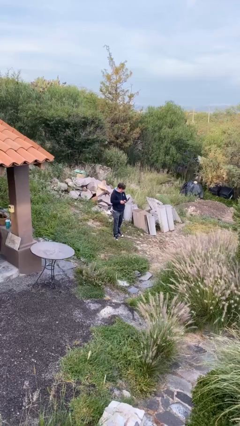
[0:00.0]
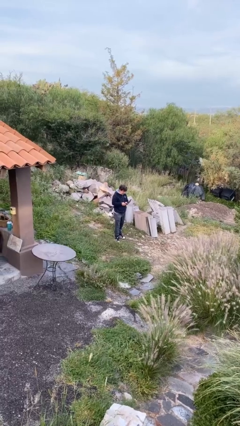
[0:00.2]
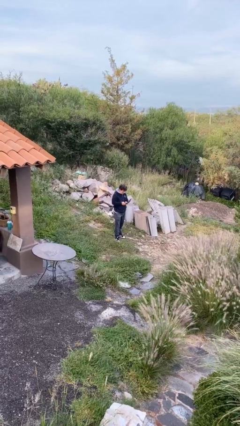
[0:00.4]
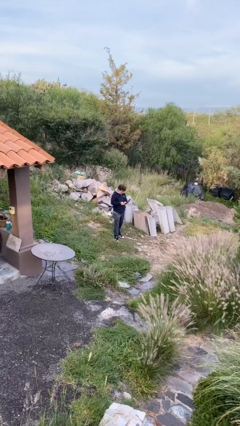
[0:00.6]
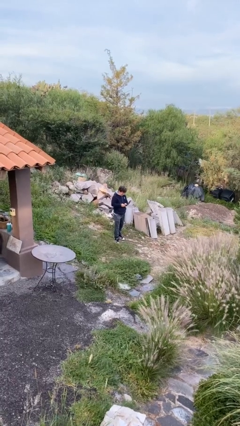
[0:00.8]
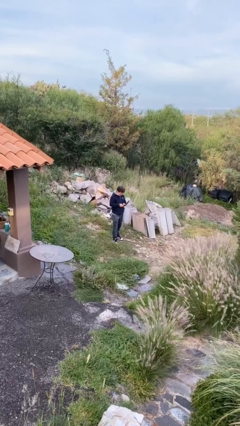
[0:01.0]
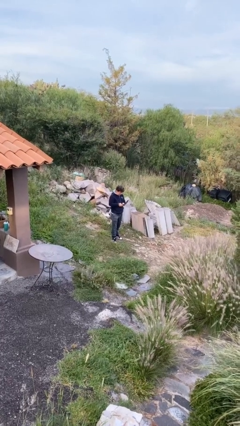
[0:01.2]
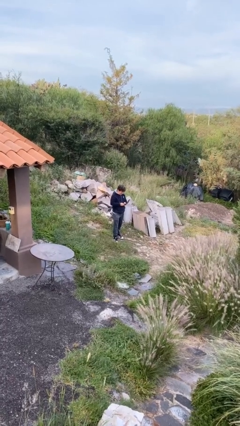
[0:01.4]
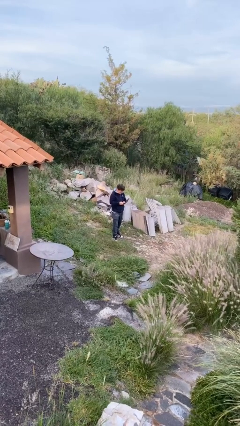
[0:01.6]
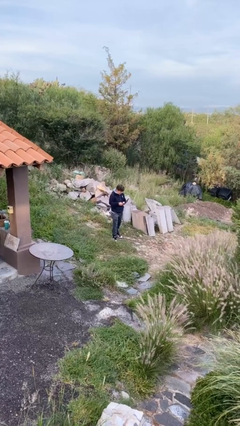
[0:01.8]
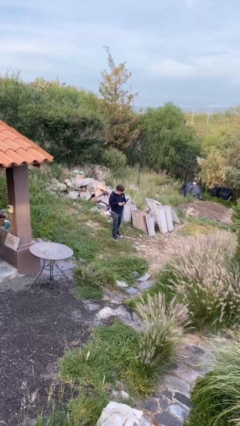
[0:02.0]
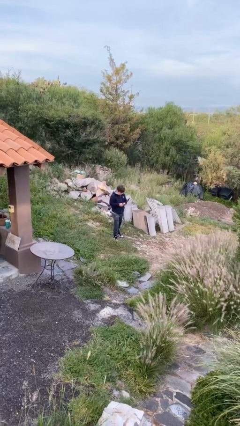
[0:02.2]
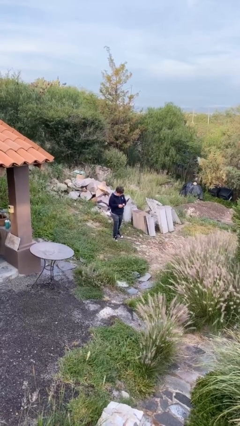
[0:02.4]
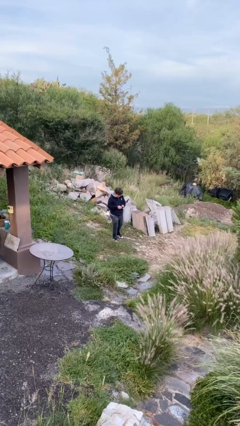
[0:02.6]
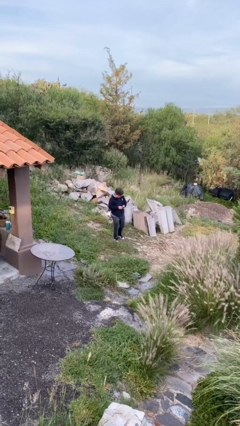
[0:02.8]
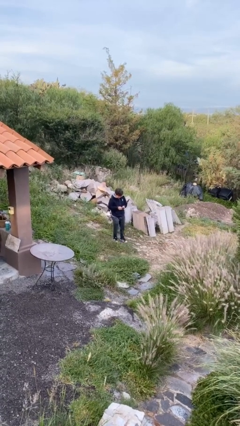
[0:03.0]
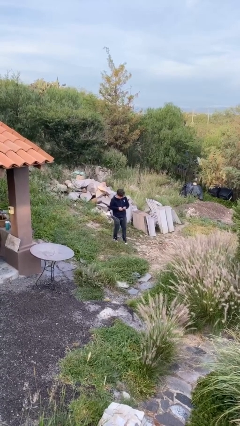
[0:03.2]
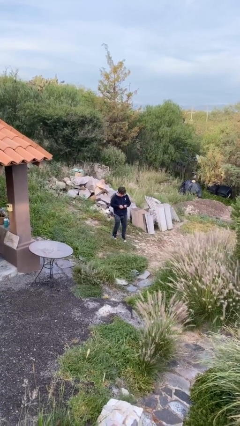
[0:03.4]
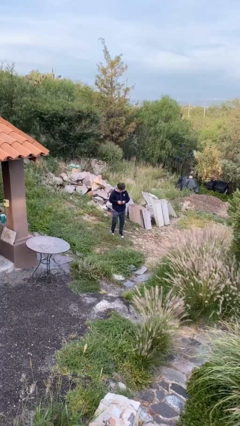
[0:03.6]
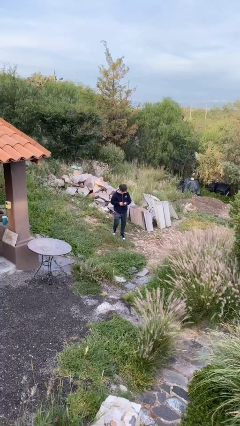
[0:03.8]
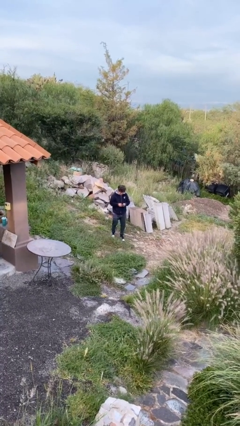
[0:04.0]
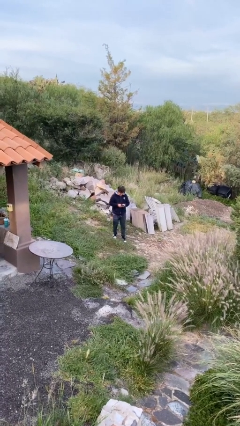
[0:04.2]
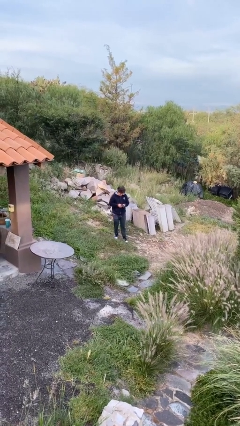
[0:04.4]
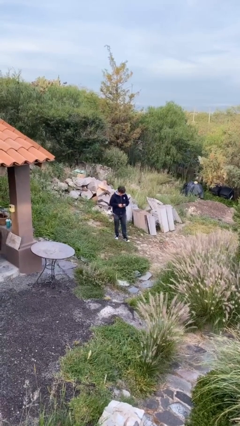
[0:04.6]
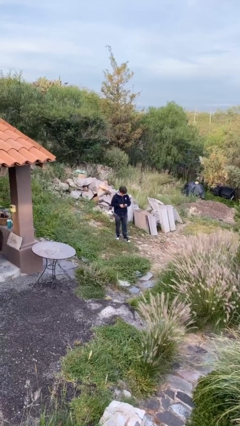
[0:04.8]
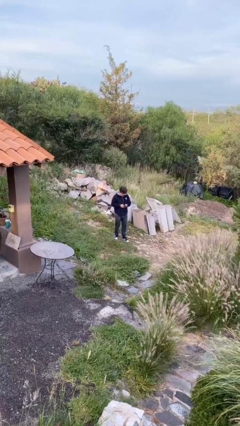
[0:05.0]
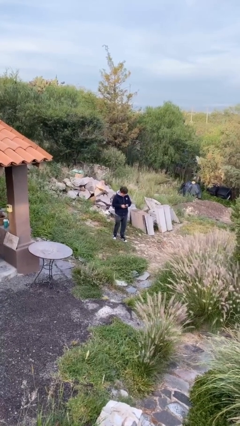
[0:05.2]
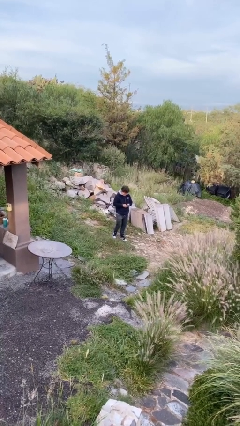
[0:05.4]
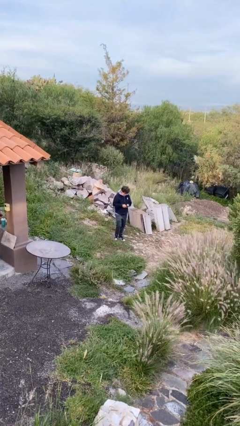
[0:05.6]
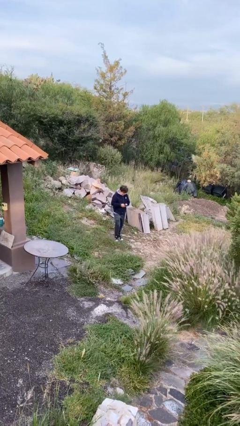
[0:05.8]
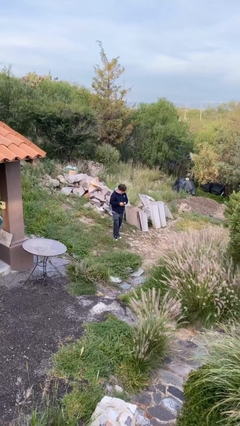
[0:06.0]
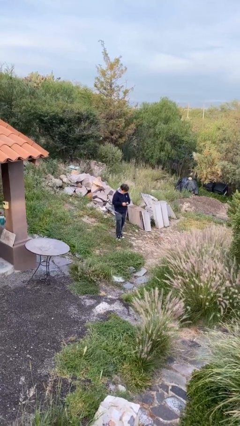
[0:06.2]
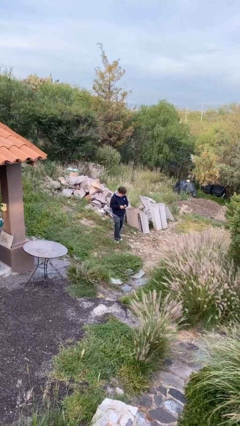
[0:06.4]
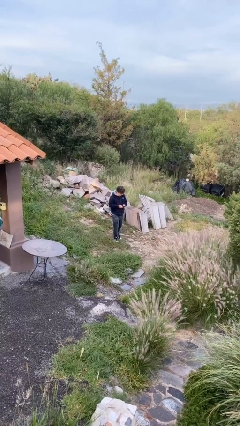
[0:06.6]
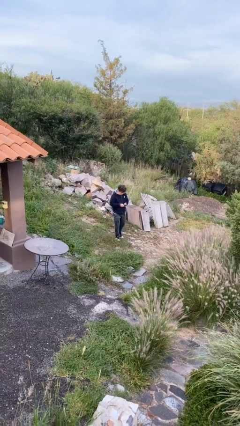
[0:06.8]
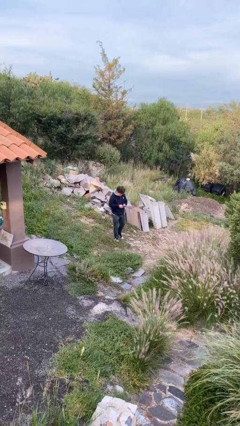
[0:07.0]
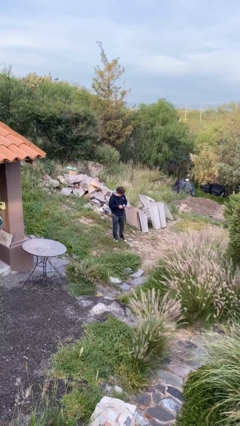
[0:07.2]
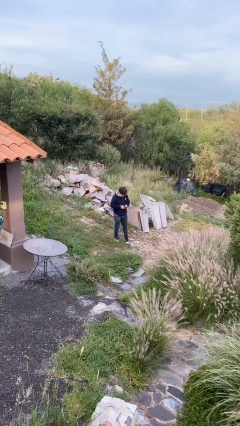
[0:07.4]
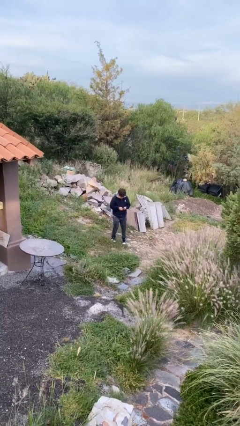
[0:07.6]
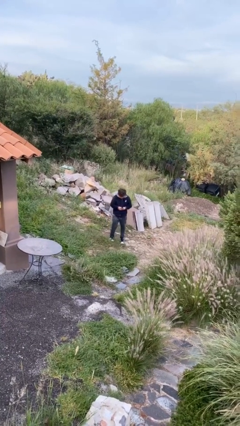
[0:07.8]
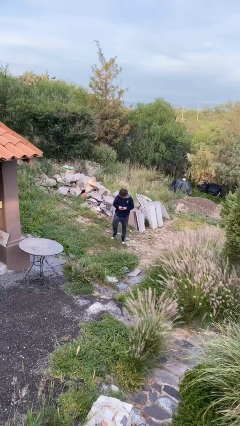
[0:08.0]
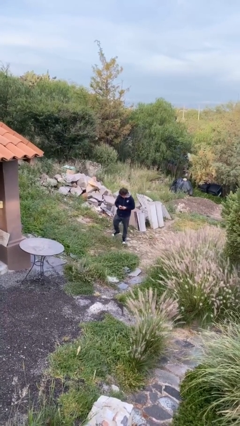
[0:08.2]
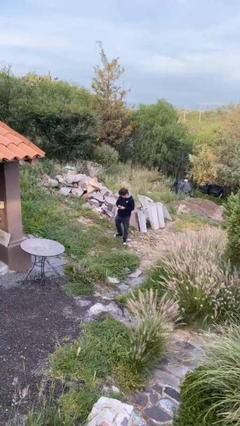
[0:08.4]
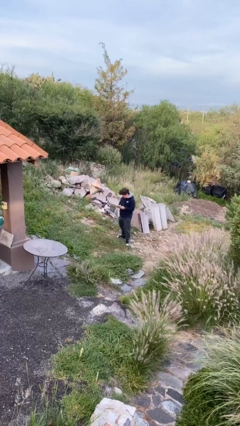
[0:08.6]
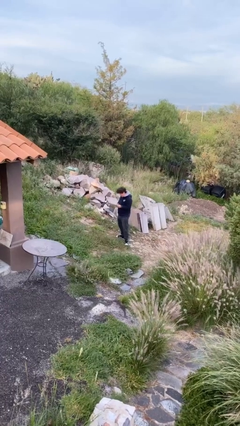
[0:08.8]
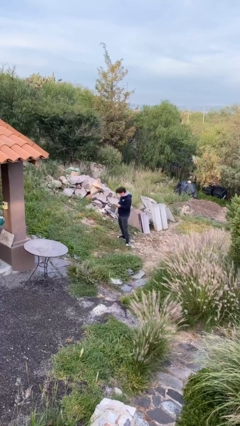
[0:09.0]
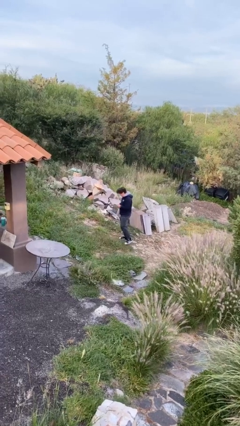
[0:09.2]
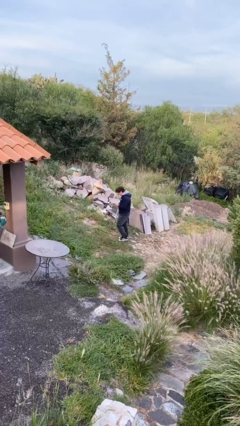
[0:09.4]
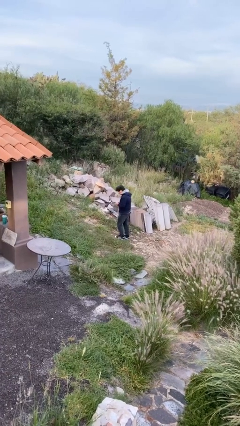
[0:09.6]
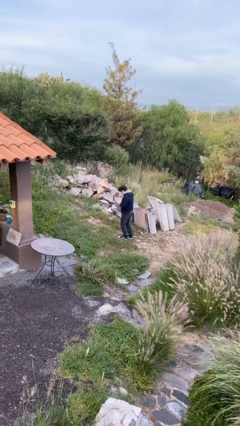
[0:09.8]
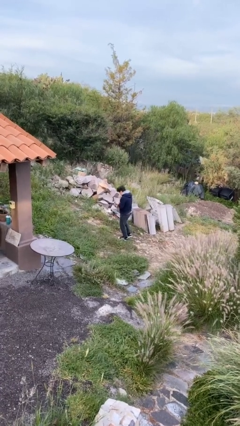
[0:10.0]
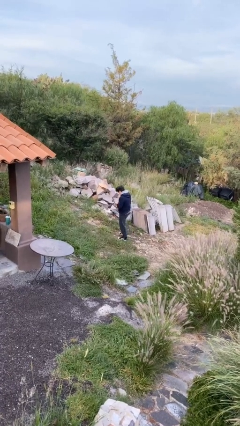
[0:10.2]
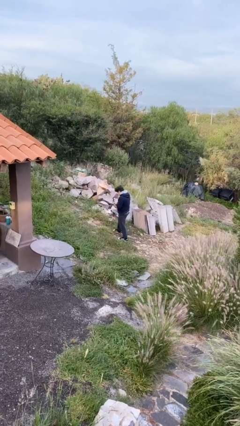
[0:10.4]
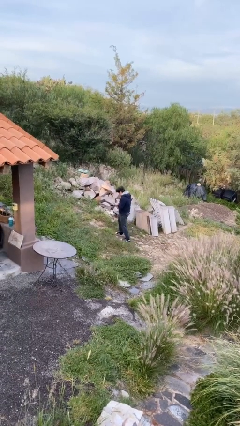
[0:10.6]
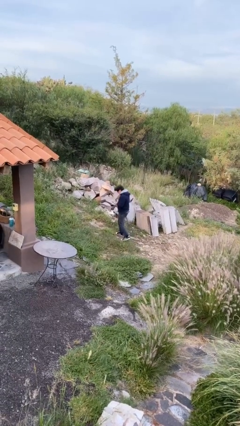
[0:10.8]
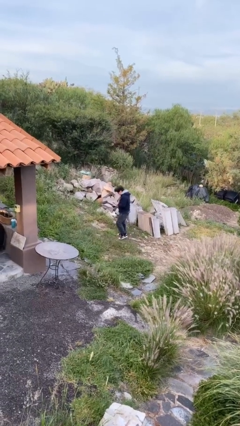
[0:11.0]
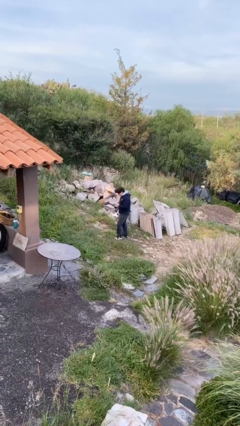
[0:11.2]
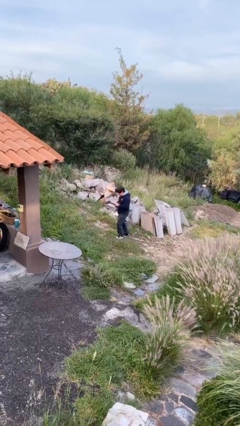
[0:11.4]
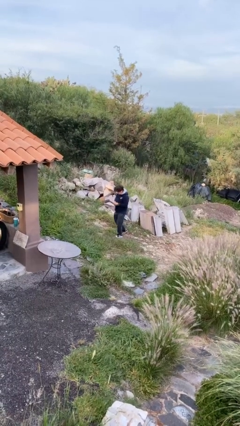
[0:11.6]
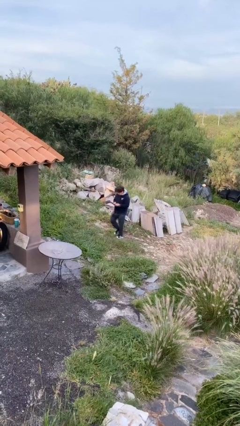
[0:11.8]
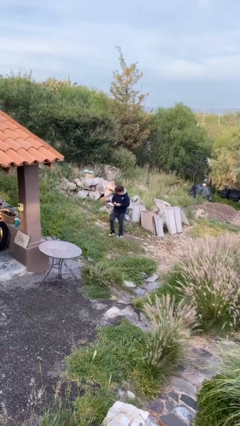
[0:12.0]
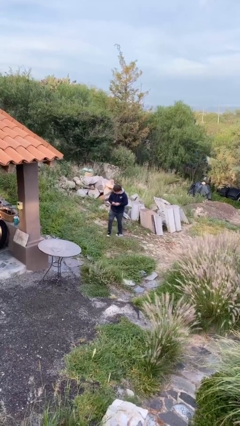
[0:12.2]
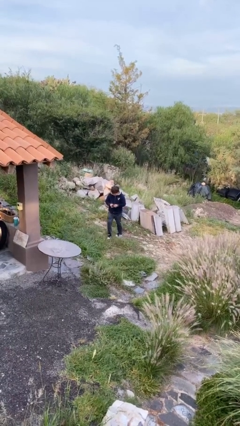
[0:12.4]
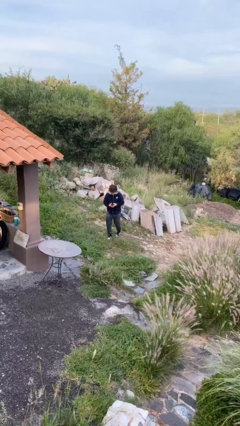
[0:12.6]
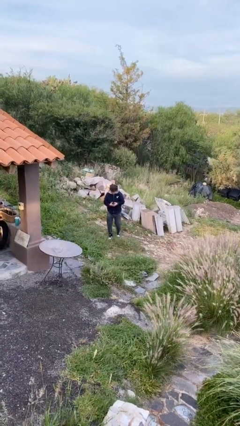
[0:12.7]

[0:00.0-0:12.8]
person texts on phone

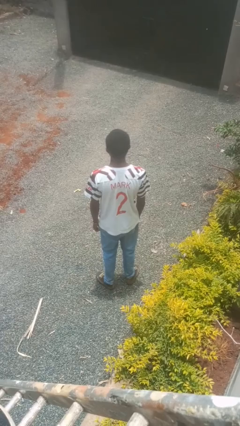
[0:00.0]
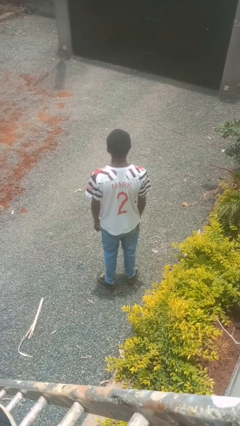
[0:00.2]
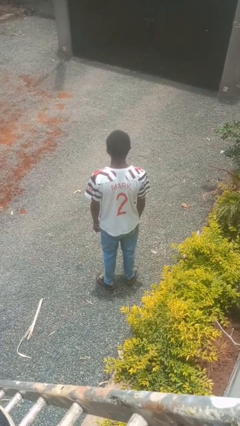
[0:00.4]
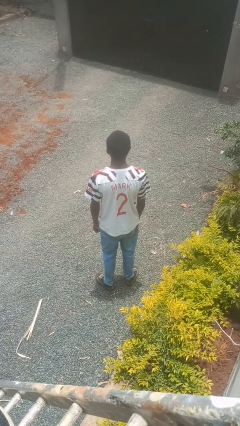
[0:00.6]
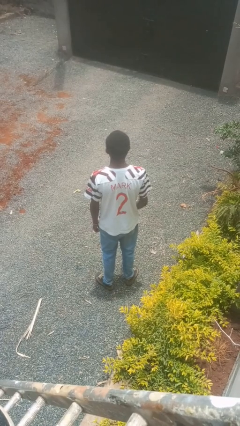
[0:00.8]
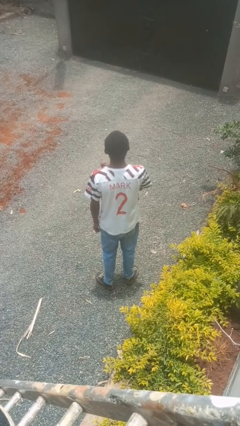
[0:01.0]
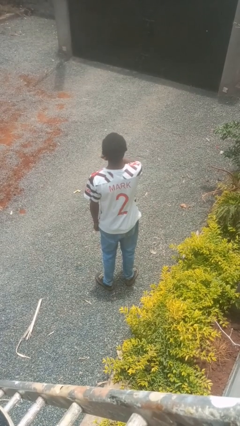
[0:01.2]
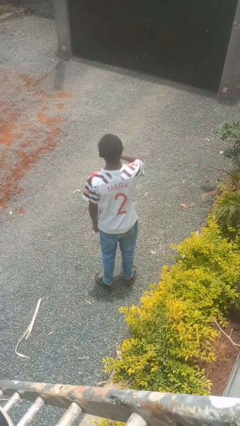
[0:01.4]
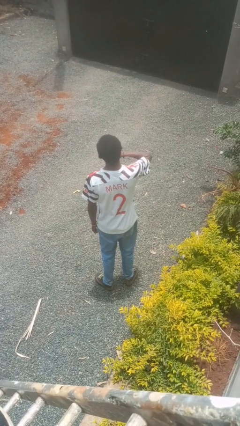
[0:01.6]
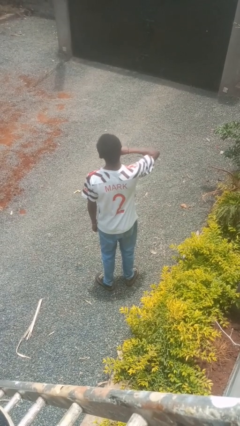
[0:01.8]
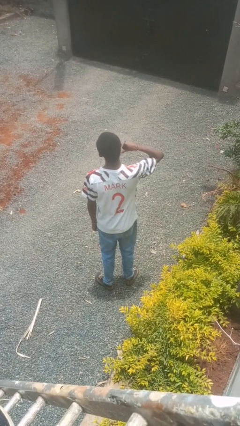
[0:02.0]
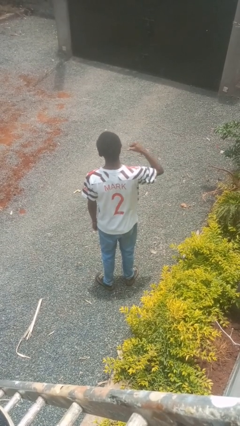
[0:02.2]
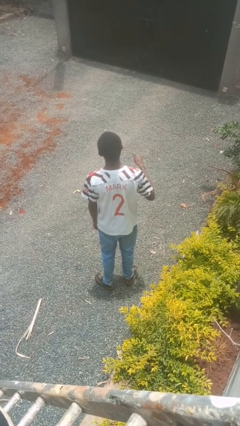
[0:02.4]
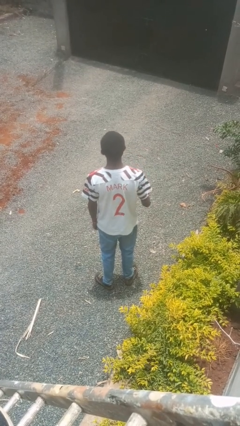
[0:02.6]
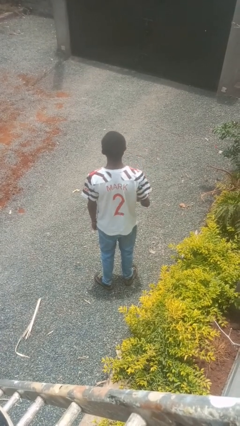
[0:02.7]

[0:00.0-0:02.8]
person gestures cut

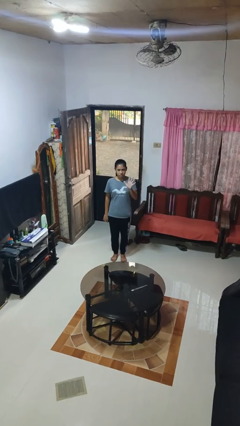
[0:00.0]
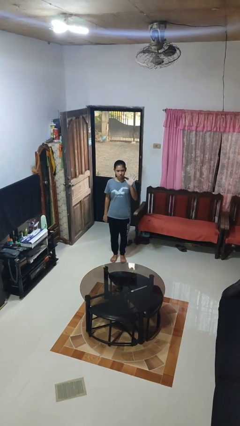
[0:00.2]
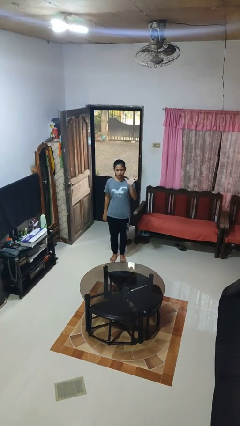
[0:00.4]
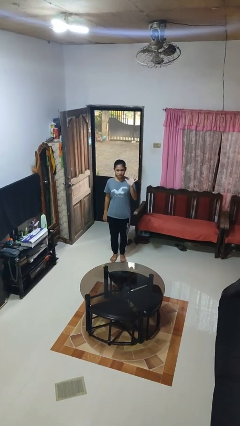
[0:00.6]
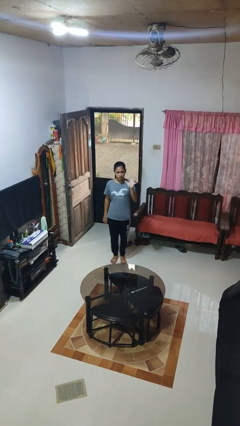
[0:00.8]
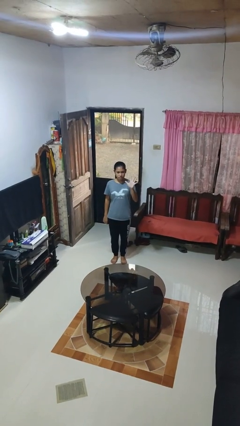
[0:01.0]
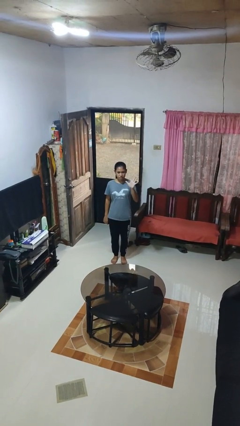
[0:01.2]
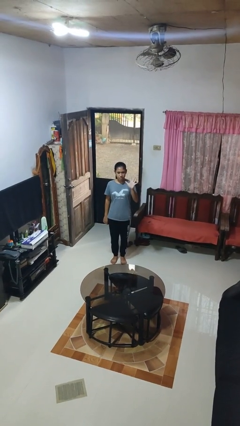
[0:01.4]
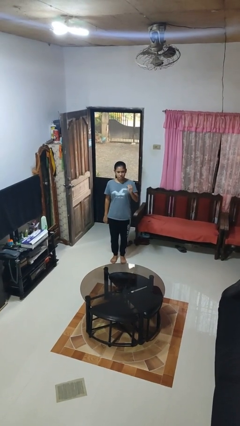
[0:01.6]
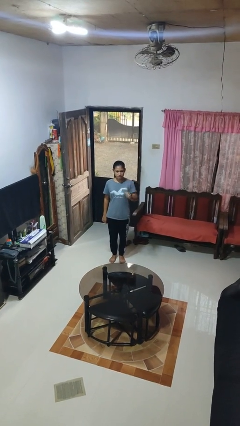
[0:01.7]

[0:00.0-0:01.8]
person gestures number five

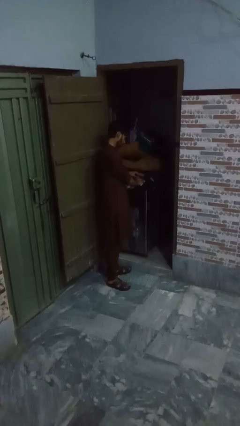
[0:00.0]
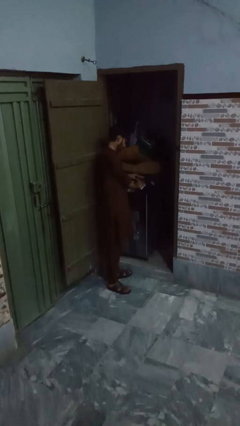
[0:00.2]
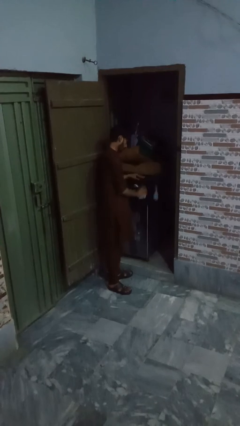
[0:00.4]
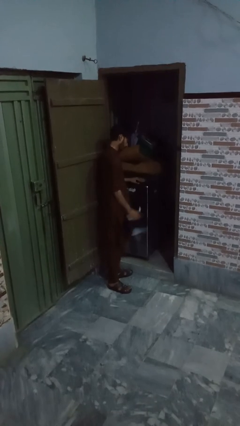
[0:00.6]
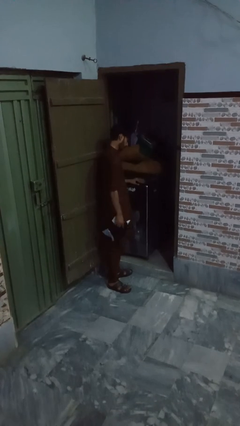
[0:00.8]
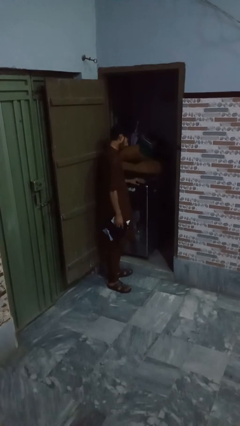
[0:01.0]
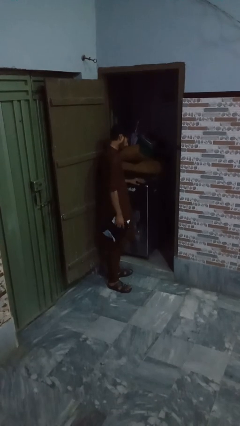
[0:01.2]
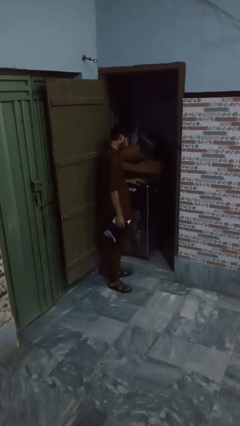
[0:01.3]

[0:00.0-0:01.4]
person unloads dryer
